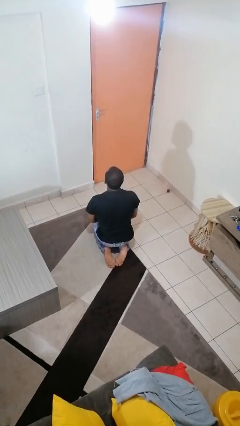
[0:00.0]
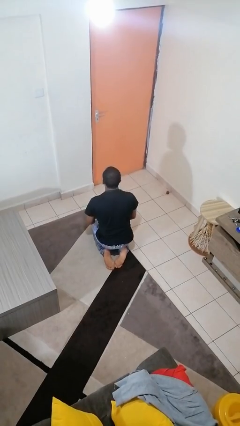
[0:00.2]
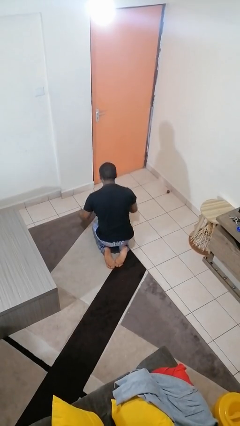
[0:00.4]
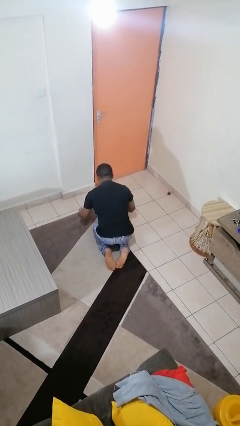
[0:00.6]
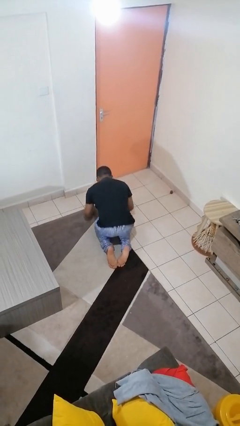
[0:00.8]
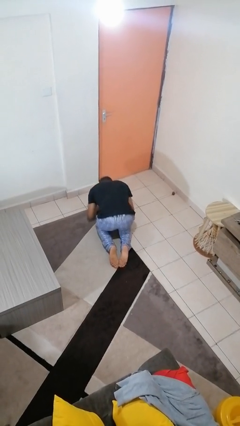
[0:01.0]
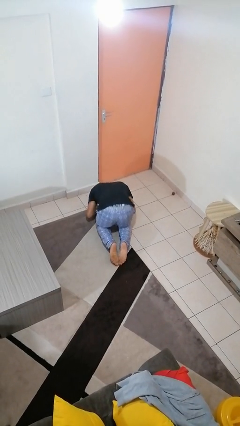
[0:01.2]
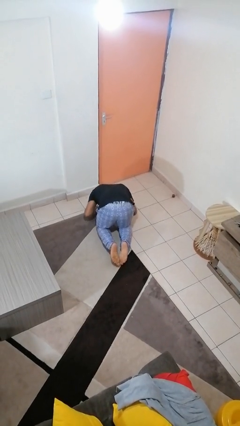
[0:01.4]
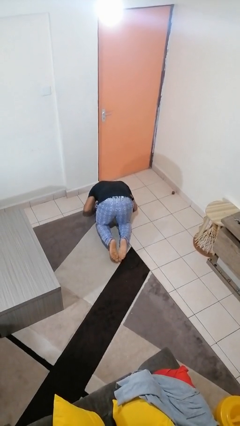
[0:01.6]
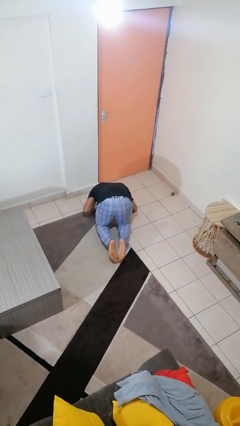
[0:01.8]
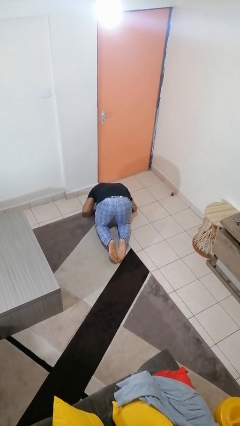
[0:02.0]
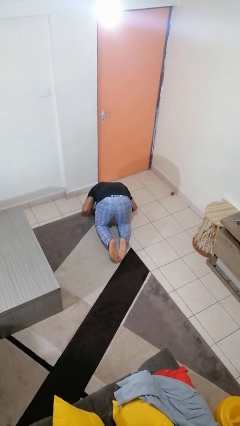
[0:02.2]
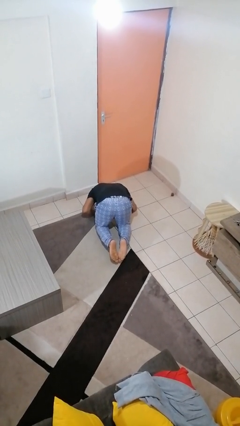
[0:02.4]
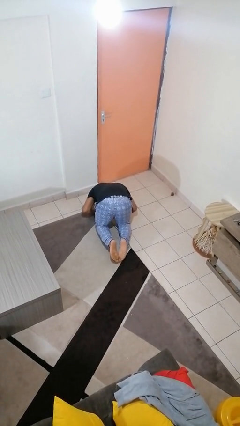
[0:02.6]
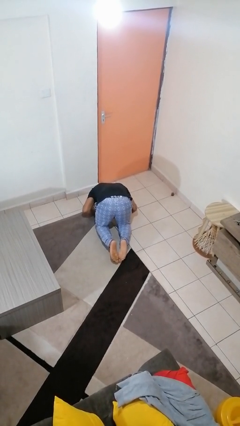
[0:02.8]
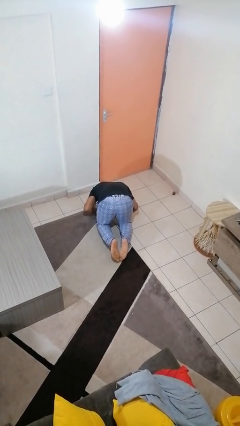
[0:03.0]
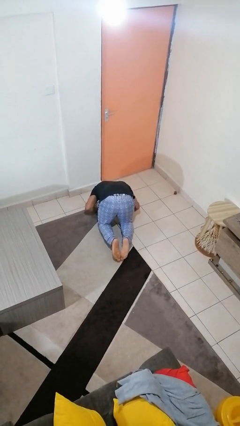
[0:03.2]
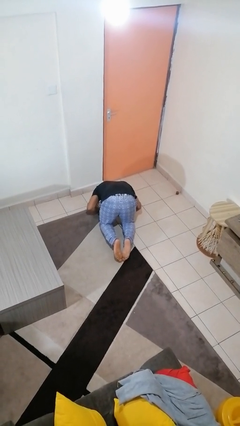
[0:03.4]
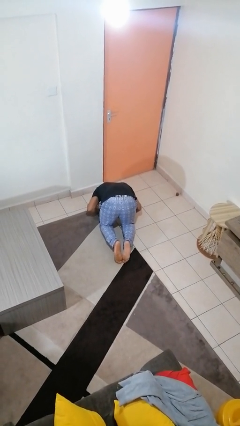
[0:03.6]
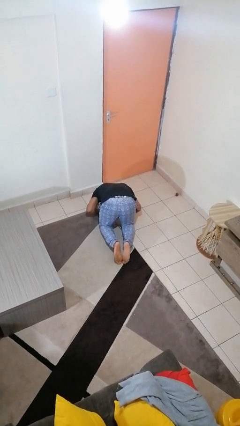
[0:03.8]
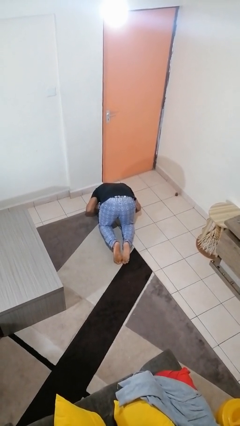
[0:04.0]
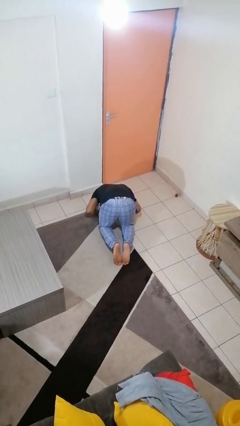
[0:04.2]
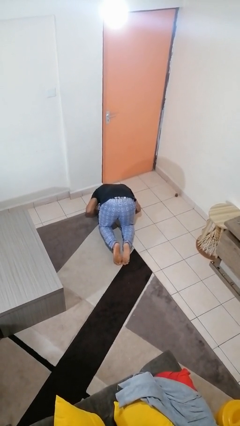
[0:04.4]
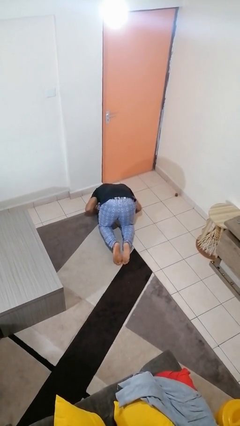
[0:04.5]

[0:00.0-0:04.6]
person prays

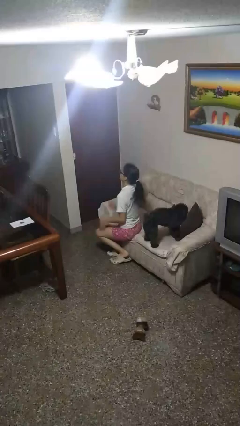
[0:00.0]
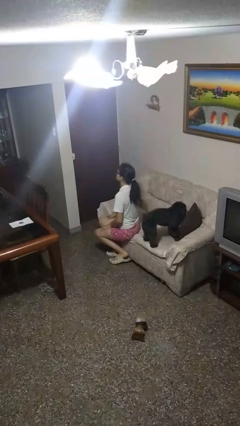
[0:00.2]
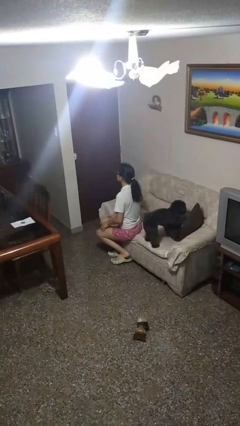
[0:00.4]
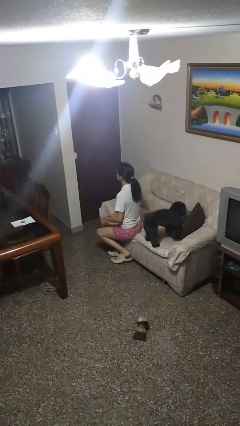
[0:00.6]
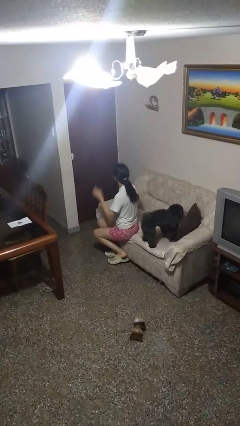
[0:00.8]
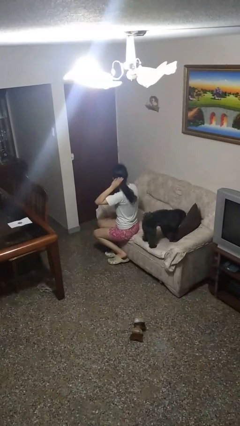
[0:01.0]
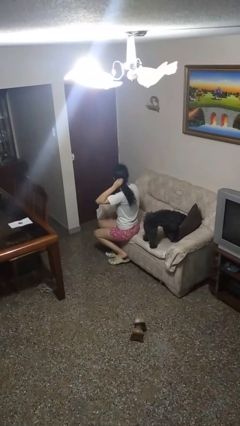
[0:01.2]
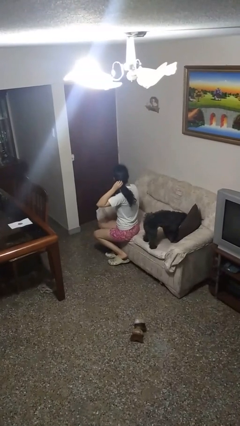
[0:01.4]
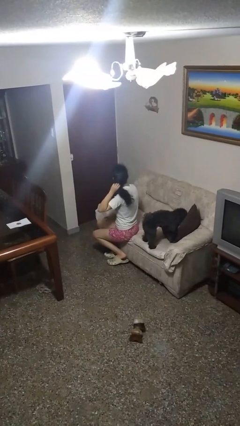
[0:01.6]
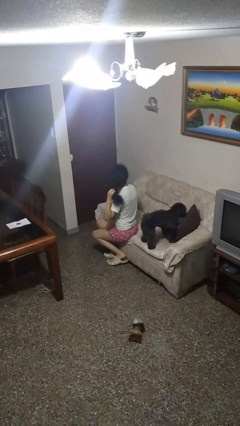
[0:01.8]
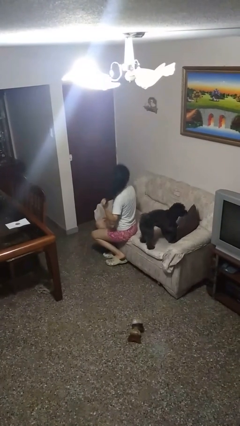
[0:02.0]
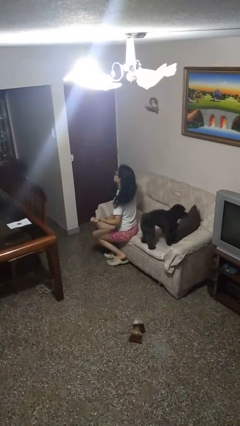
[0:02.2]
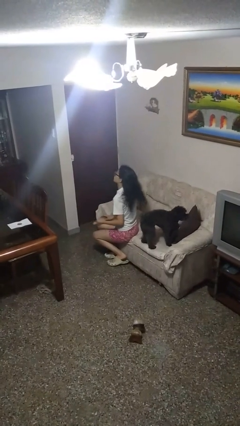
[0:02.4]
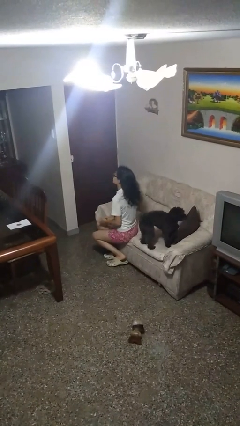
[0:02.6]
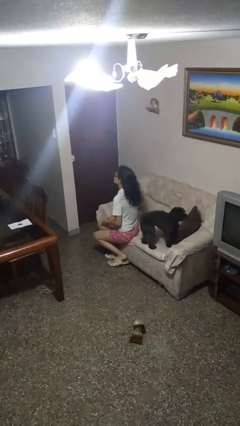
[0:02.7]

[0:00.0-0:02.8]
person takes off hairtie

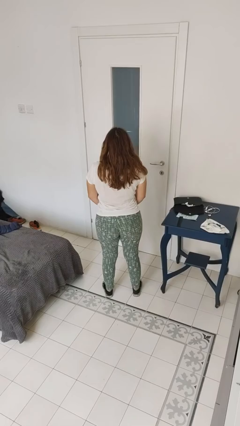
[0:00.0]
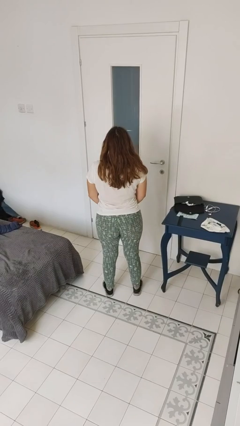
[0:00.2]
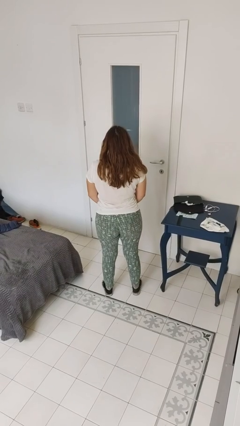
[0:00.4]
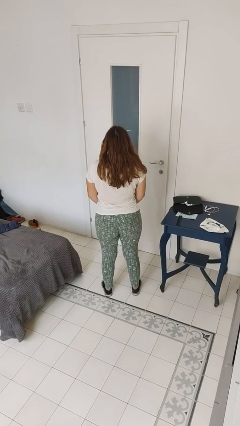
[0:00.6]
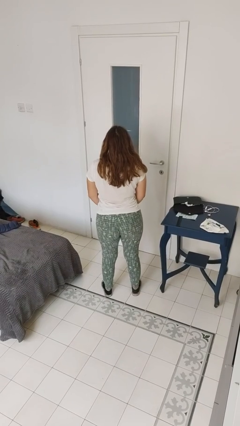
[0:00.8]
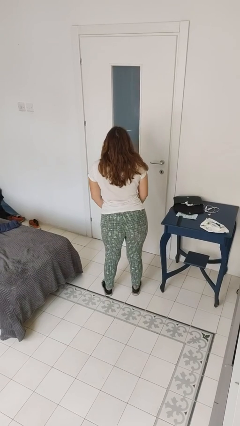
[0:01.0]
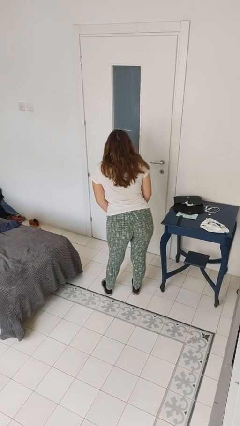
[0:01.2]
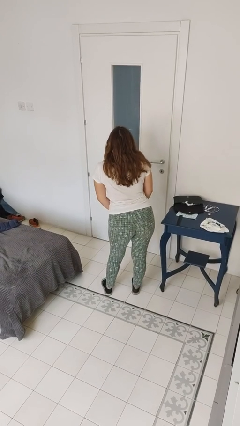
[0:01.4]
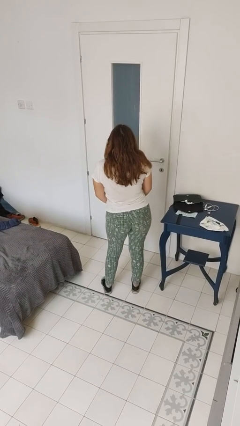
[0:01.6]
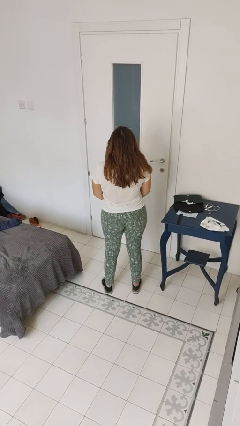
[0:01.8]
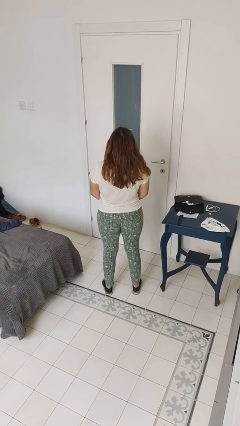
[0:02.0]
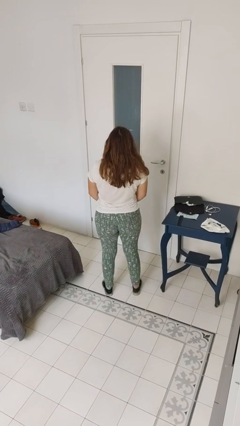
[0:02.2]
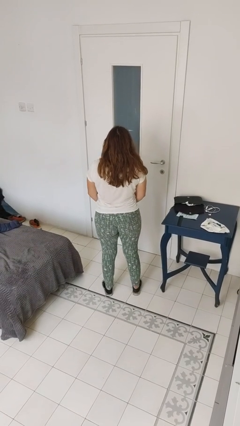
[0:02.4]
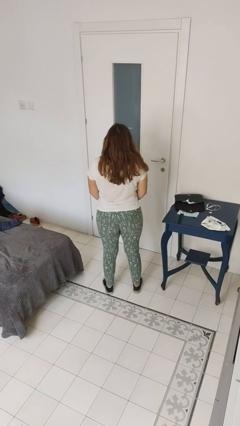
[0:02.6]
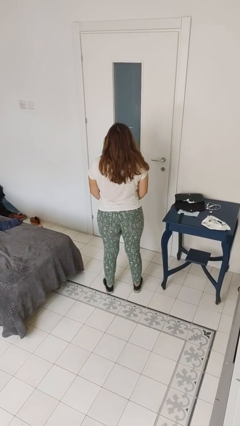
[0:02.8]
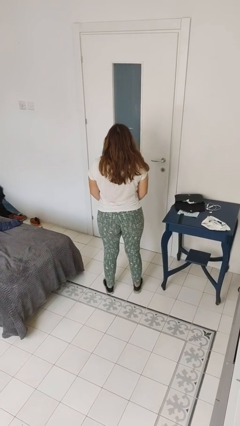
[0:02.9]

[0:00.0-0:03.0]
person wiggles hips

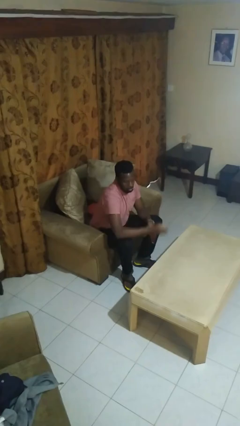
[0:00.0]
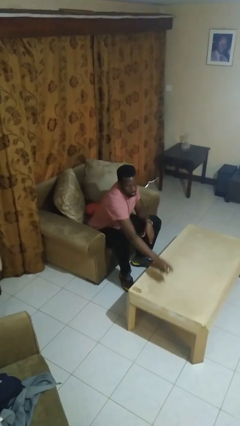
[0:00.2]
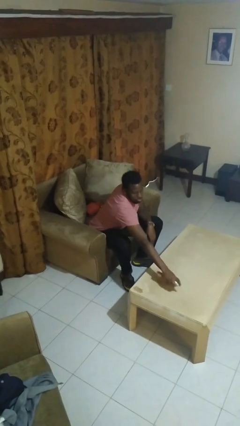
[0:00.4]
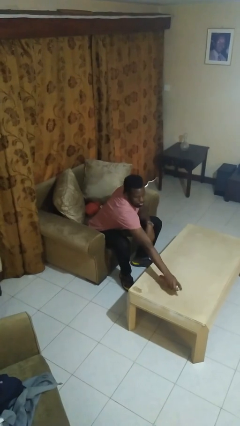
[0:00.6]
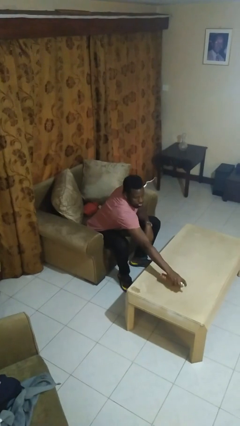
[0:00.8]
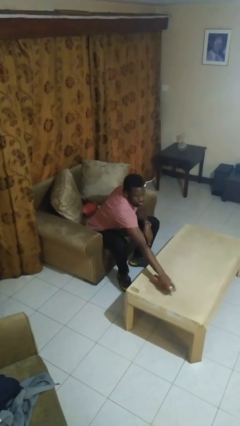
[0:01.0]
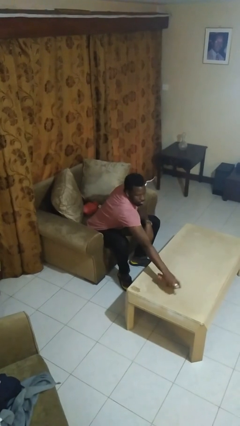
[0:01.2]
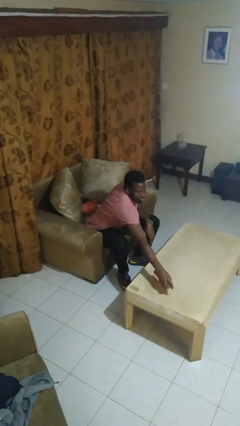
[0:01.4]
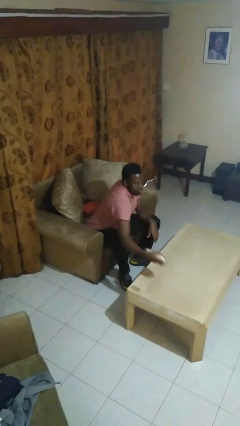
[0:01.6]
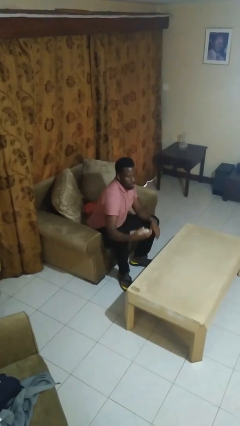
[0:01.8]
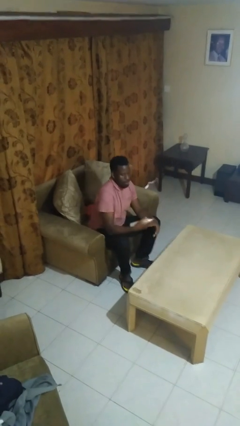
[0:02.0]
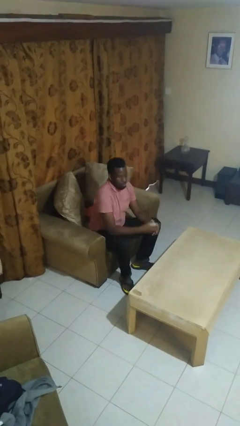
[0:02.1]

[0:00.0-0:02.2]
person sprays from bottle

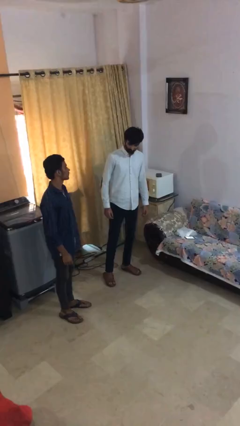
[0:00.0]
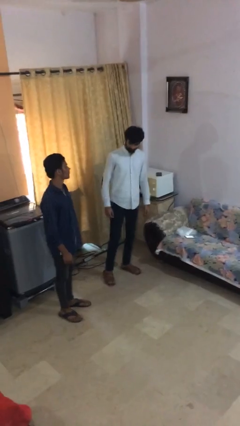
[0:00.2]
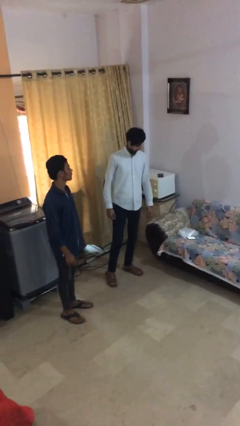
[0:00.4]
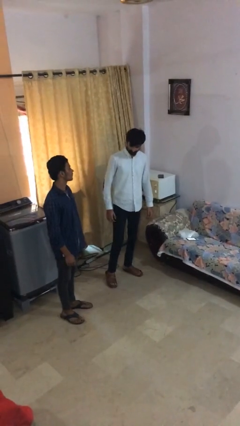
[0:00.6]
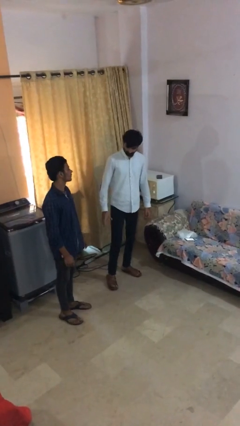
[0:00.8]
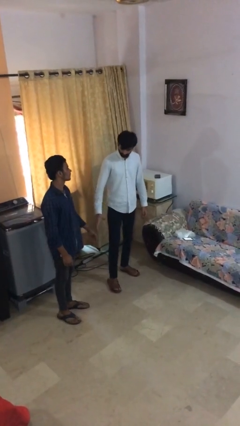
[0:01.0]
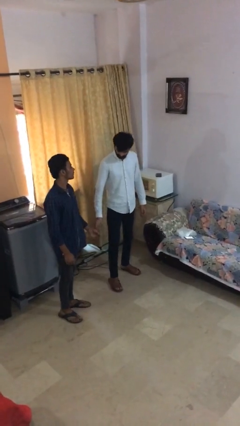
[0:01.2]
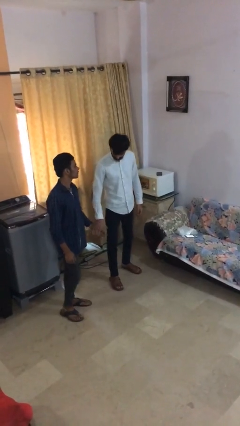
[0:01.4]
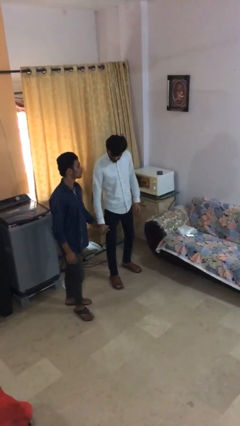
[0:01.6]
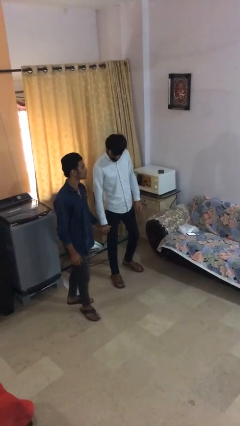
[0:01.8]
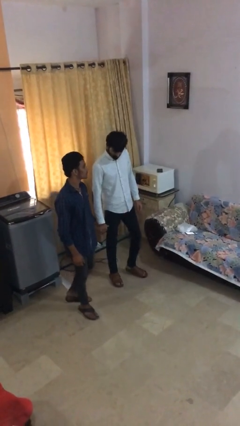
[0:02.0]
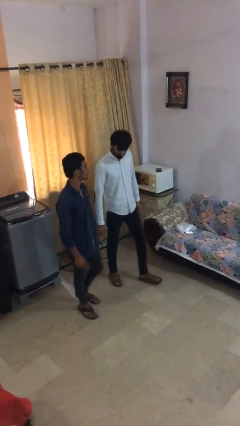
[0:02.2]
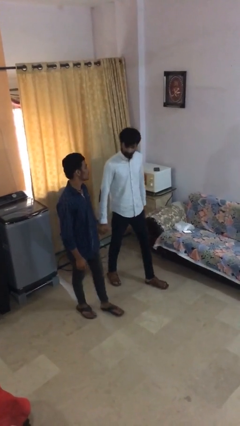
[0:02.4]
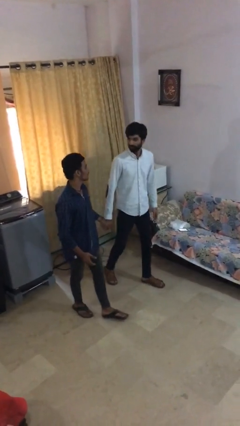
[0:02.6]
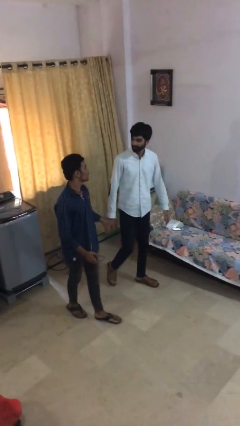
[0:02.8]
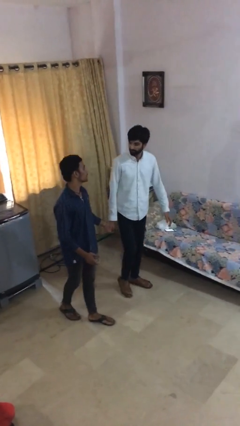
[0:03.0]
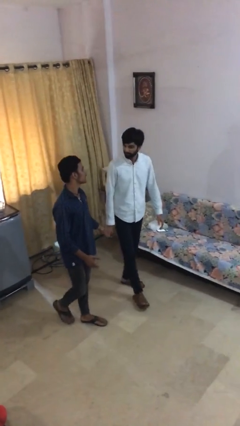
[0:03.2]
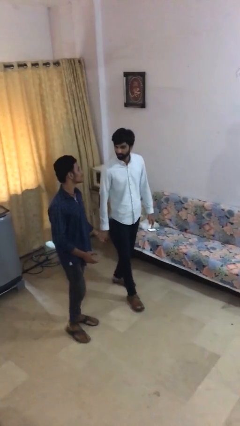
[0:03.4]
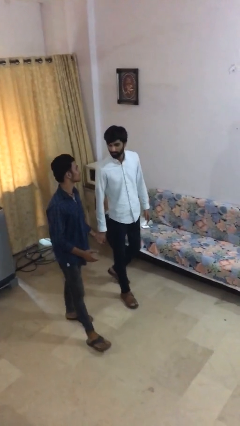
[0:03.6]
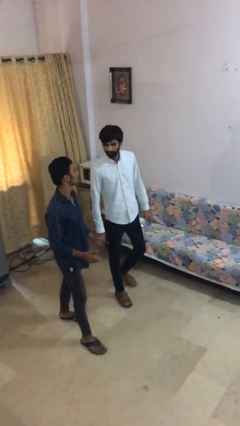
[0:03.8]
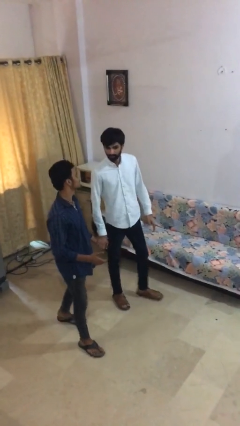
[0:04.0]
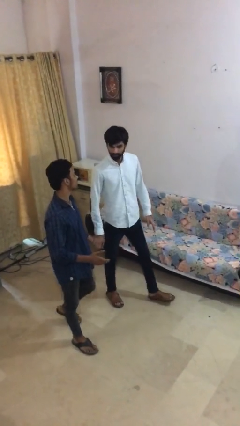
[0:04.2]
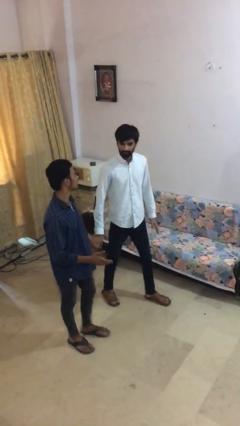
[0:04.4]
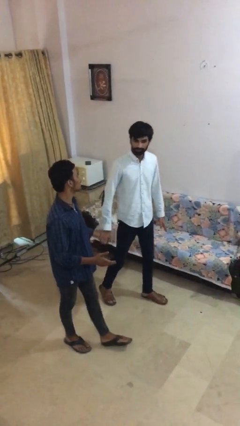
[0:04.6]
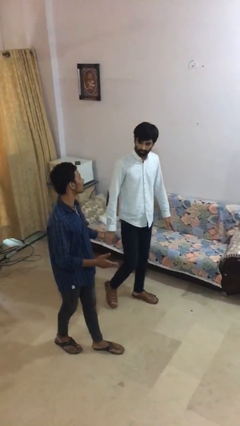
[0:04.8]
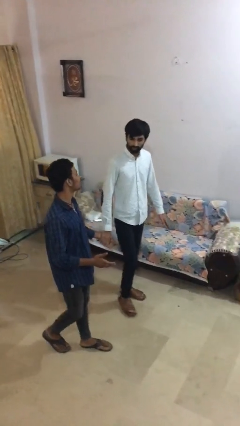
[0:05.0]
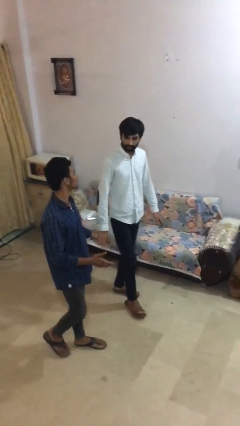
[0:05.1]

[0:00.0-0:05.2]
person holds hand
